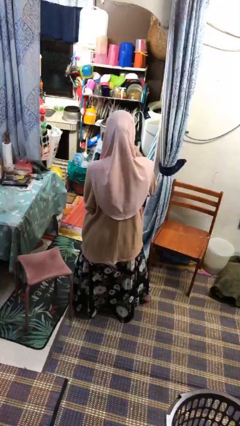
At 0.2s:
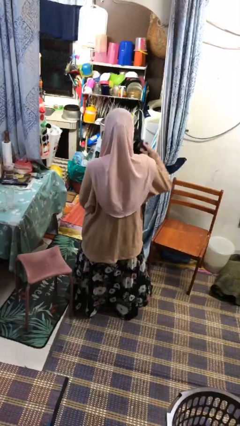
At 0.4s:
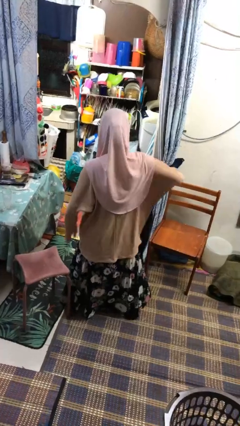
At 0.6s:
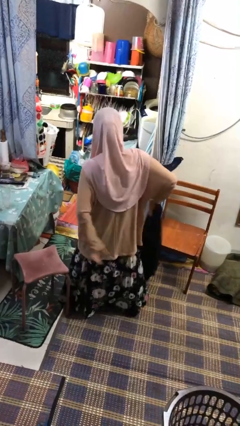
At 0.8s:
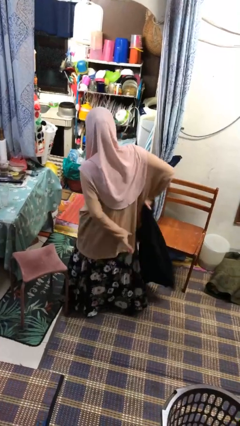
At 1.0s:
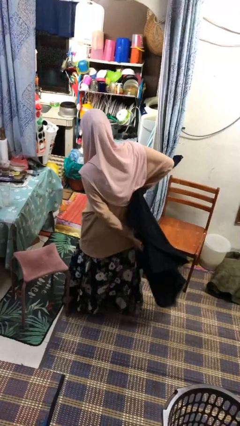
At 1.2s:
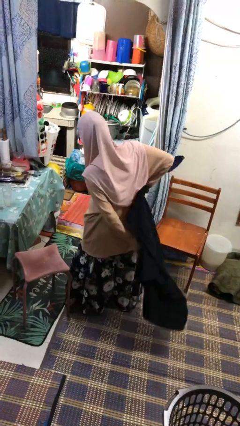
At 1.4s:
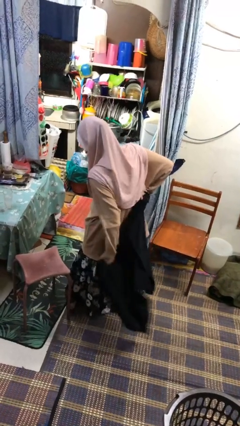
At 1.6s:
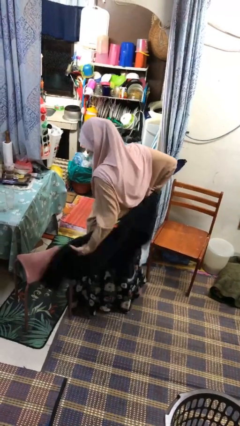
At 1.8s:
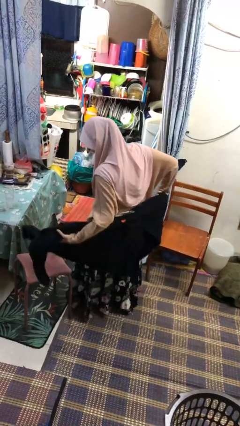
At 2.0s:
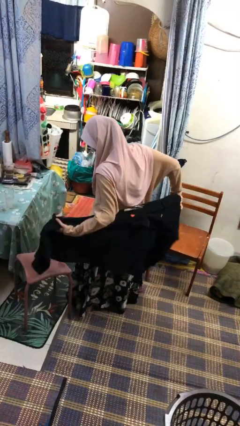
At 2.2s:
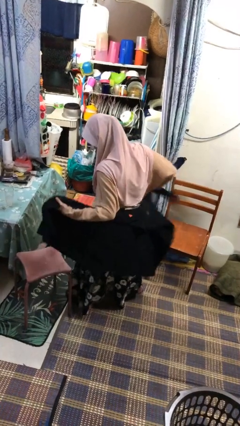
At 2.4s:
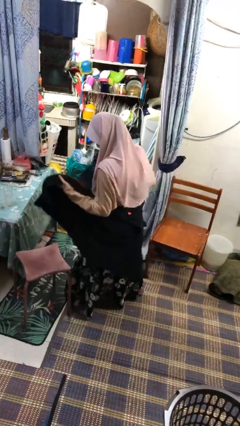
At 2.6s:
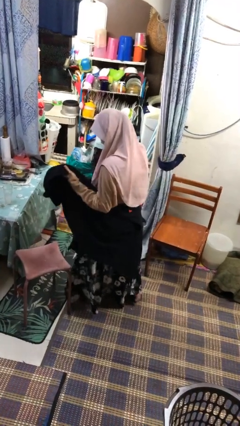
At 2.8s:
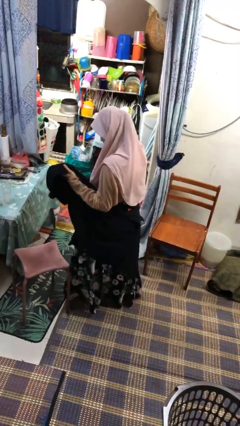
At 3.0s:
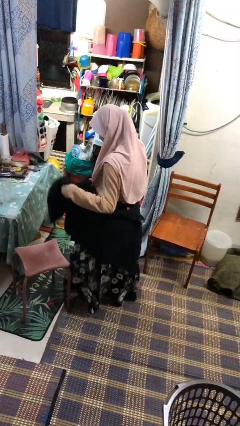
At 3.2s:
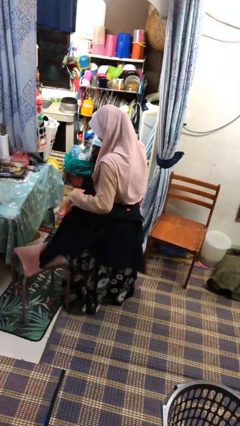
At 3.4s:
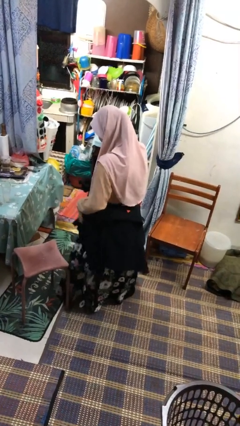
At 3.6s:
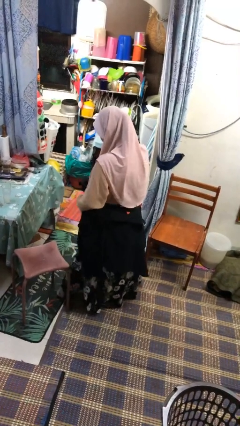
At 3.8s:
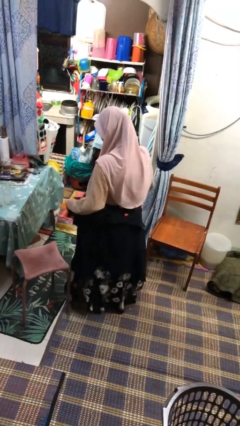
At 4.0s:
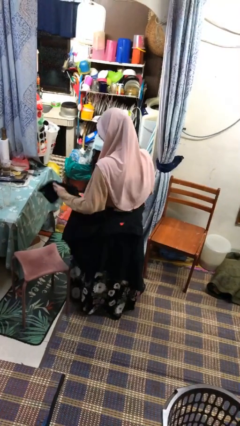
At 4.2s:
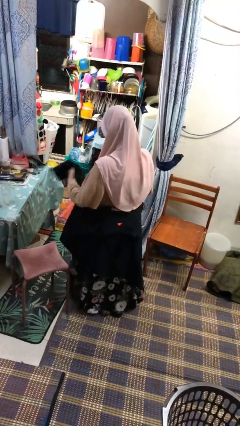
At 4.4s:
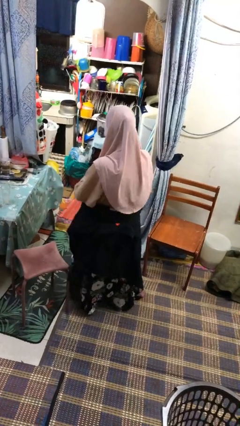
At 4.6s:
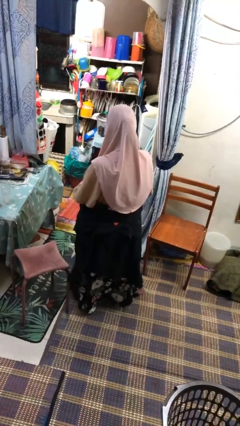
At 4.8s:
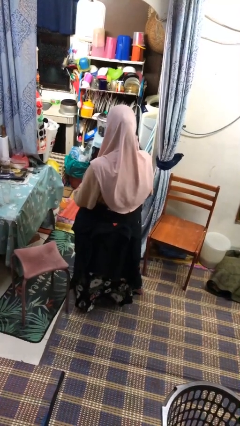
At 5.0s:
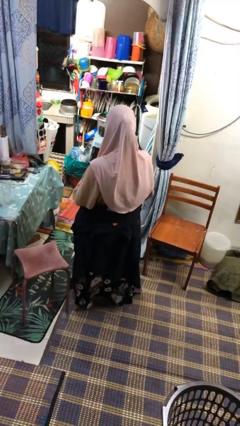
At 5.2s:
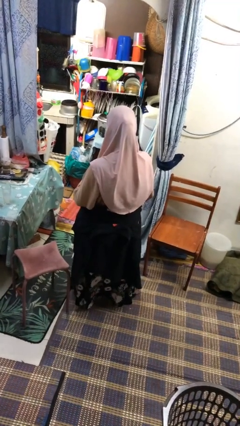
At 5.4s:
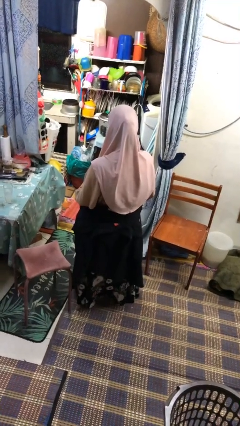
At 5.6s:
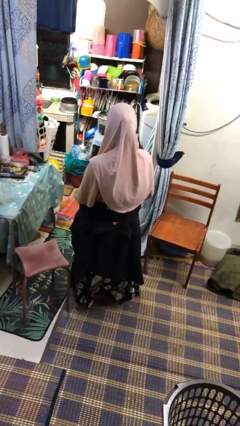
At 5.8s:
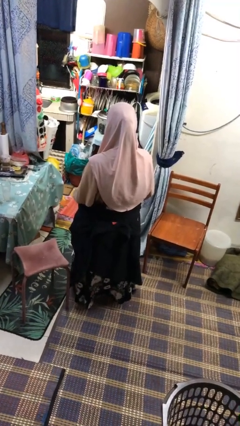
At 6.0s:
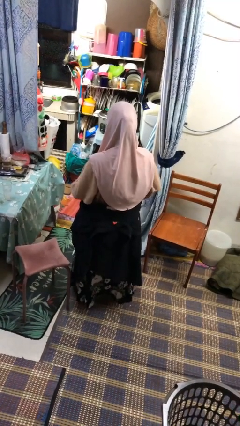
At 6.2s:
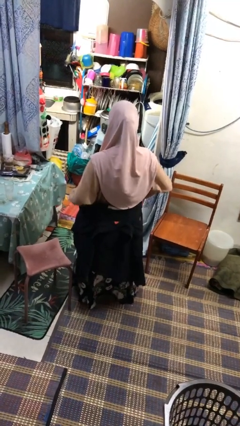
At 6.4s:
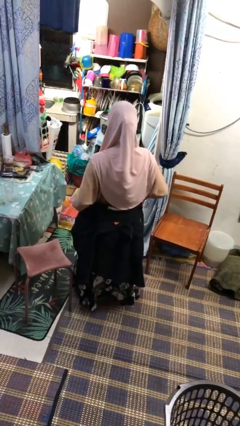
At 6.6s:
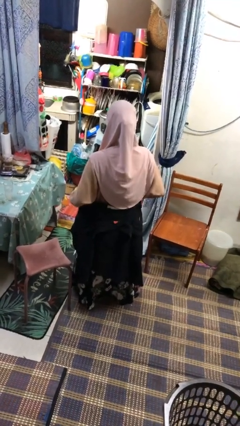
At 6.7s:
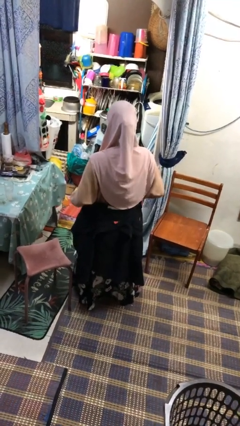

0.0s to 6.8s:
person ties jacket around waist

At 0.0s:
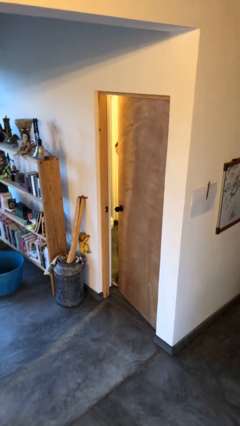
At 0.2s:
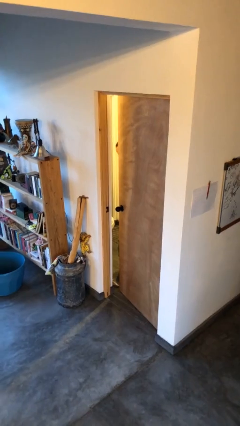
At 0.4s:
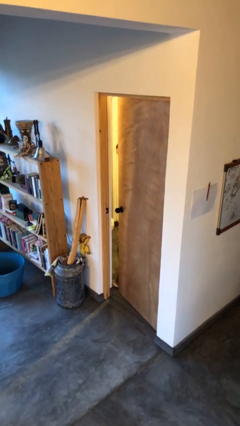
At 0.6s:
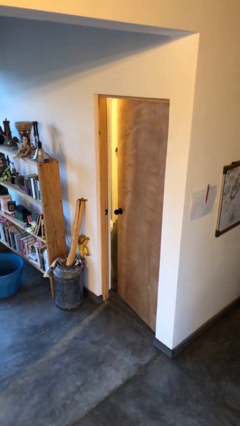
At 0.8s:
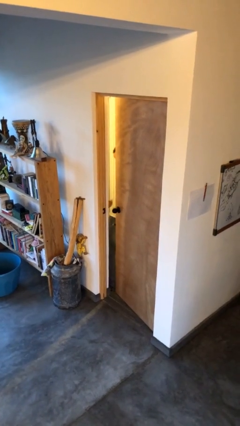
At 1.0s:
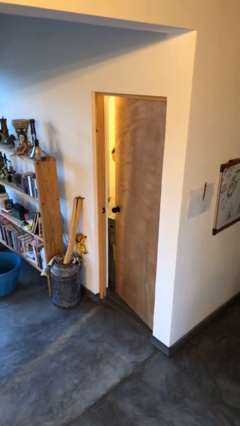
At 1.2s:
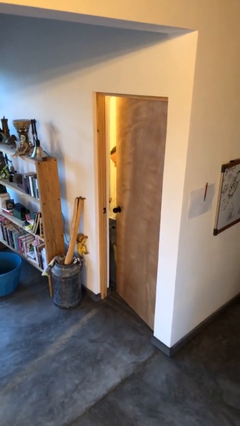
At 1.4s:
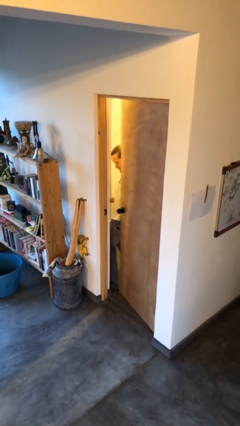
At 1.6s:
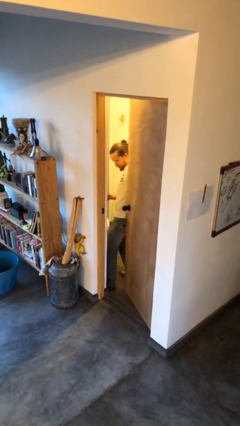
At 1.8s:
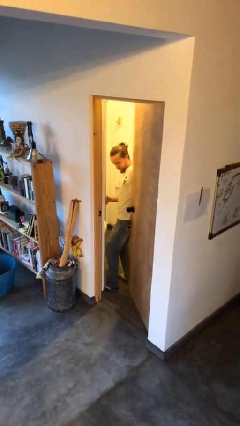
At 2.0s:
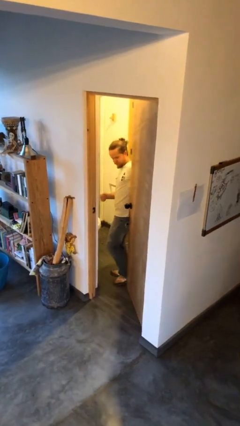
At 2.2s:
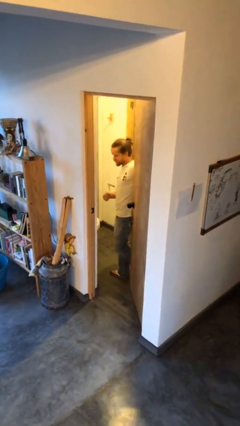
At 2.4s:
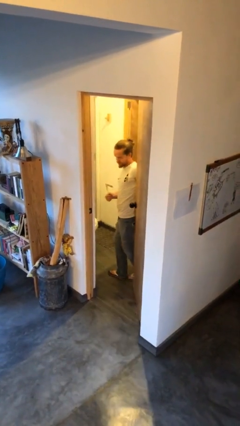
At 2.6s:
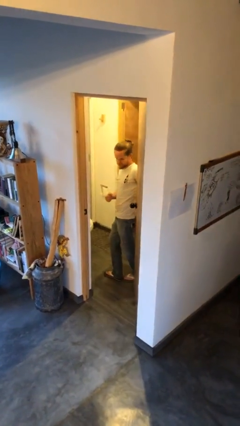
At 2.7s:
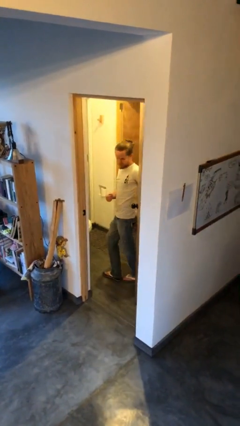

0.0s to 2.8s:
person opens facility door

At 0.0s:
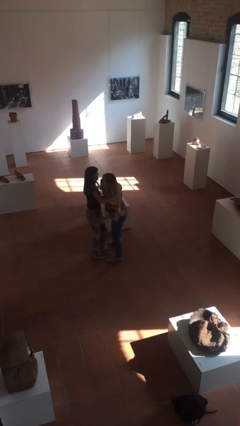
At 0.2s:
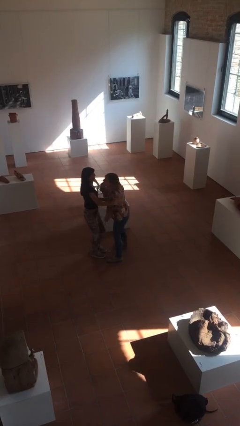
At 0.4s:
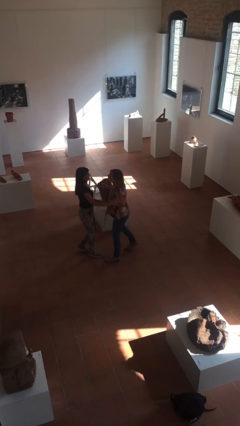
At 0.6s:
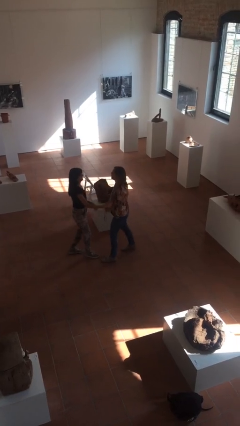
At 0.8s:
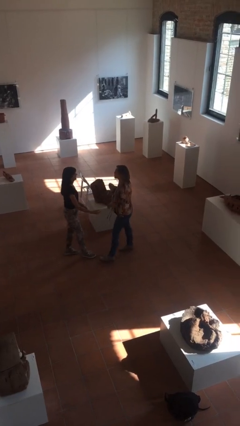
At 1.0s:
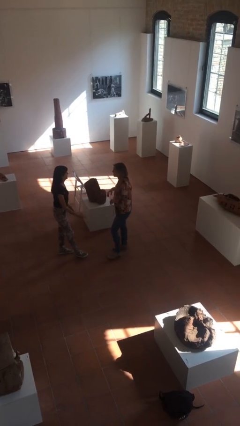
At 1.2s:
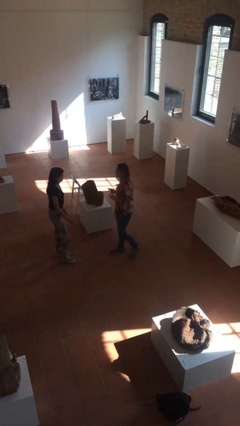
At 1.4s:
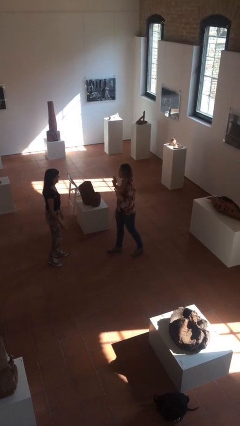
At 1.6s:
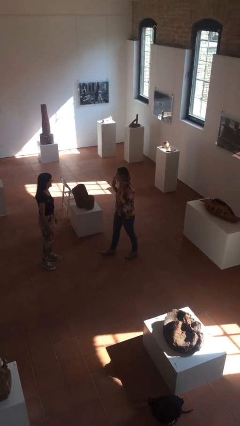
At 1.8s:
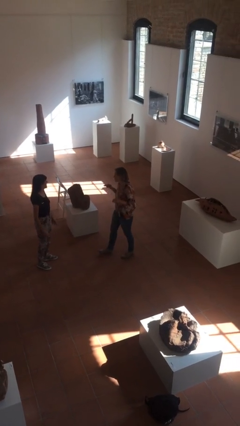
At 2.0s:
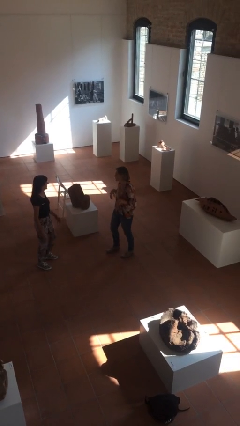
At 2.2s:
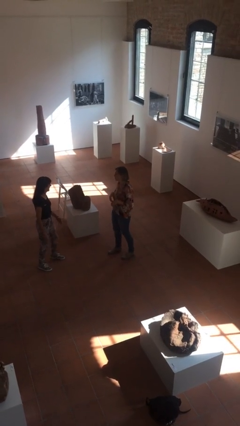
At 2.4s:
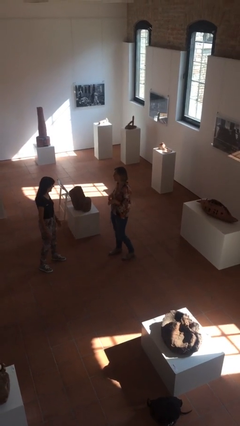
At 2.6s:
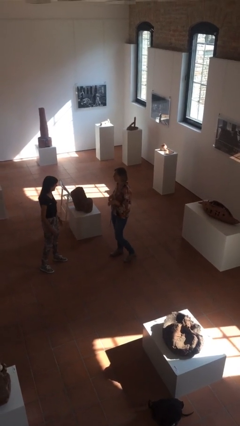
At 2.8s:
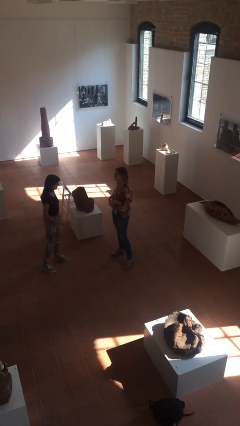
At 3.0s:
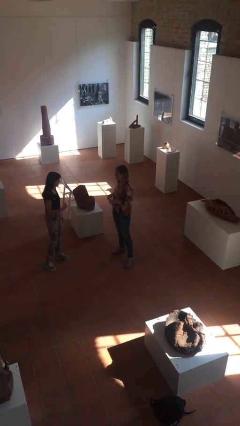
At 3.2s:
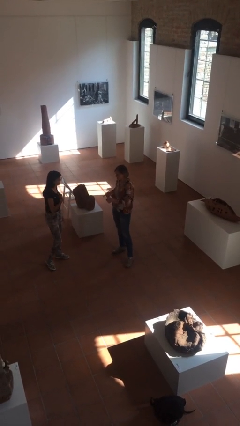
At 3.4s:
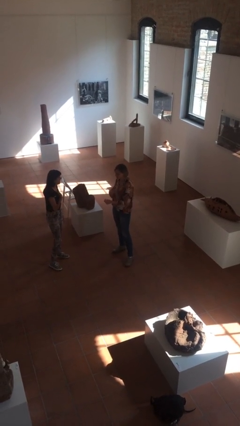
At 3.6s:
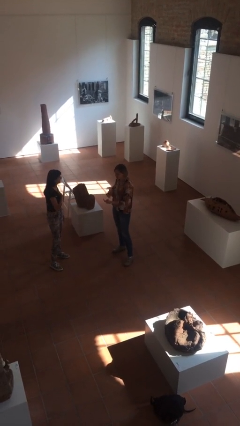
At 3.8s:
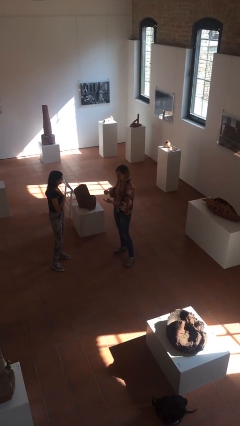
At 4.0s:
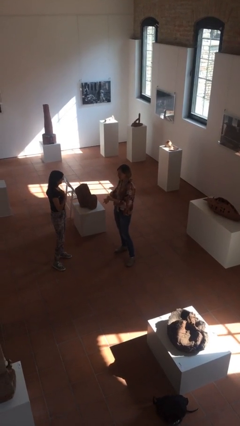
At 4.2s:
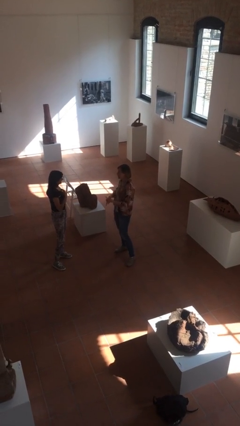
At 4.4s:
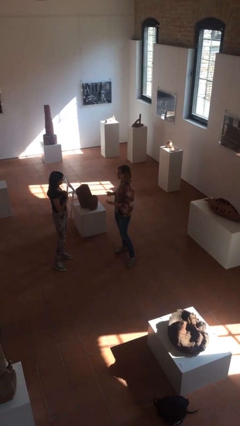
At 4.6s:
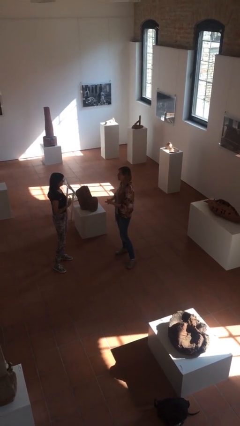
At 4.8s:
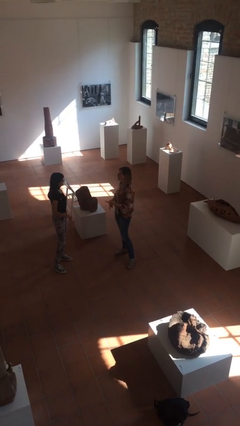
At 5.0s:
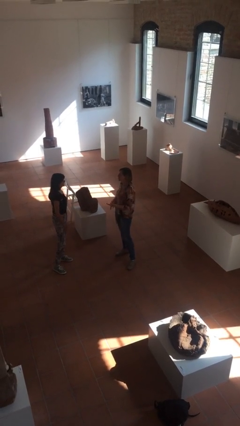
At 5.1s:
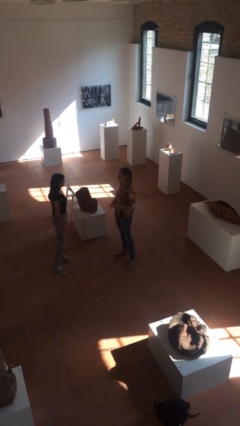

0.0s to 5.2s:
person talks to person

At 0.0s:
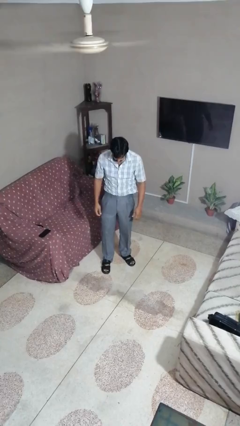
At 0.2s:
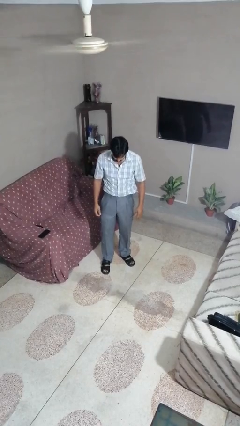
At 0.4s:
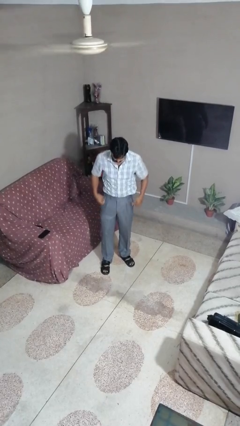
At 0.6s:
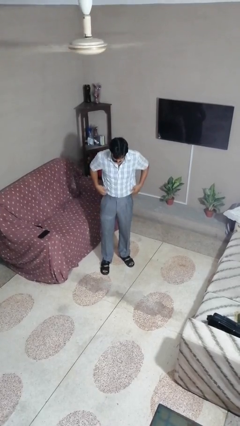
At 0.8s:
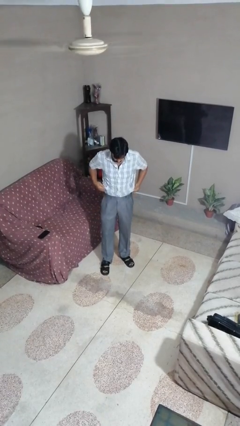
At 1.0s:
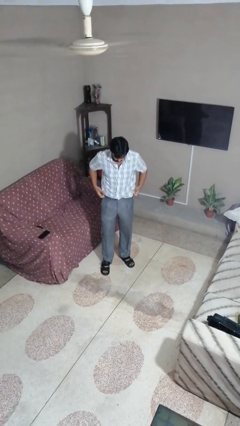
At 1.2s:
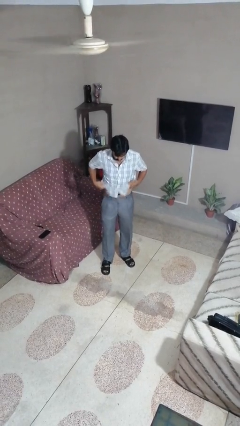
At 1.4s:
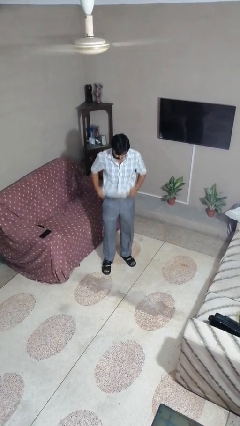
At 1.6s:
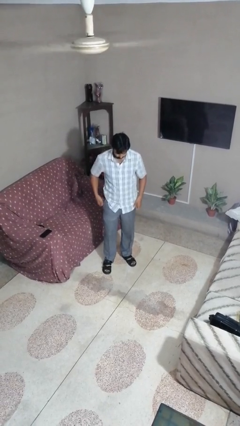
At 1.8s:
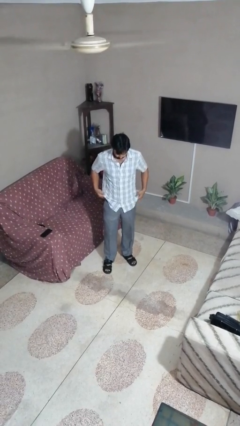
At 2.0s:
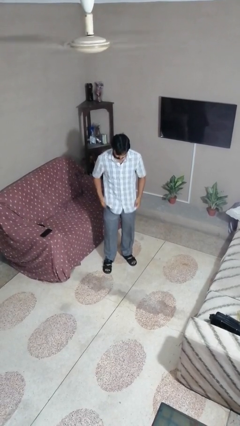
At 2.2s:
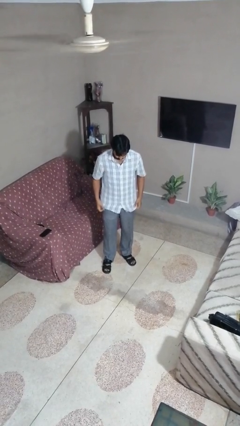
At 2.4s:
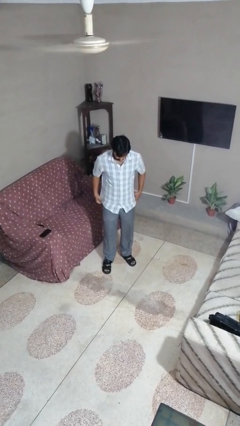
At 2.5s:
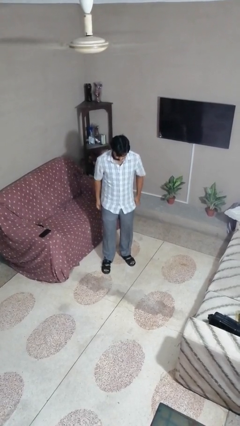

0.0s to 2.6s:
person untucks shirt

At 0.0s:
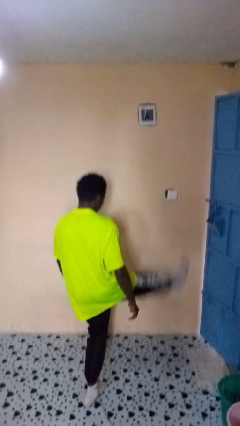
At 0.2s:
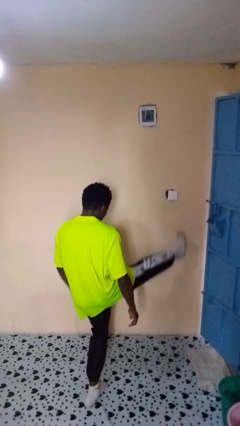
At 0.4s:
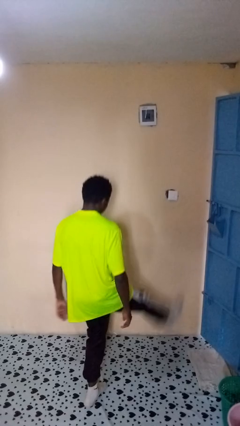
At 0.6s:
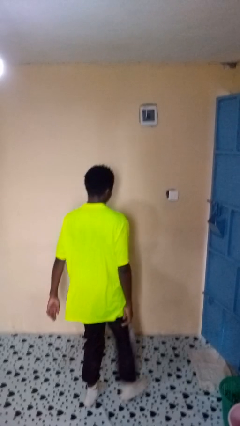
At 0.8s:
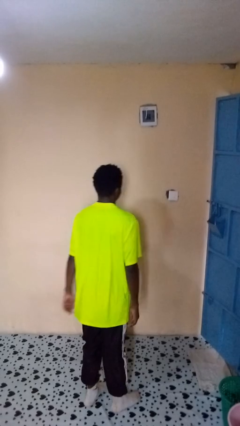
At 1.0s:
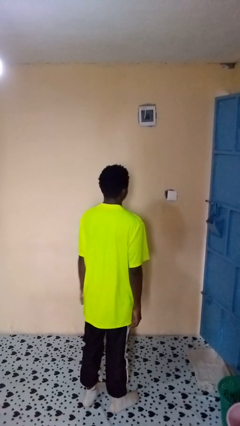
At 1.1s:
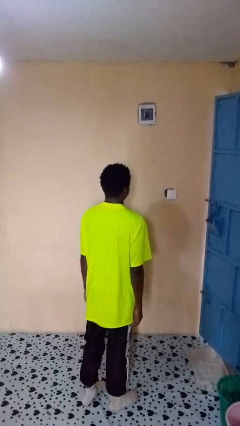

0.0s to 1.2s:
person karate kicks
